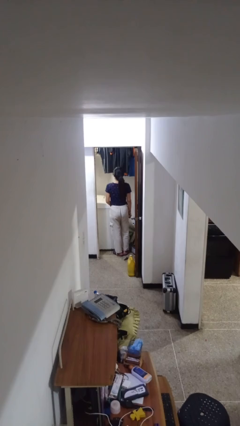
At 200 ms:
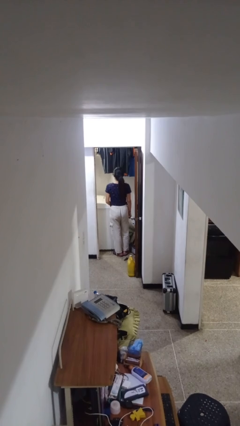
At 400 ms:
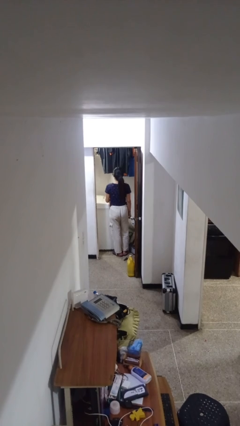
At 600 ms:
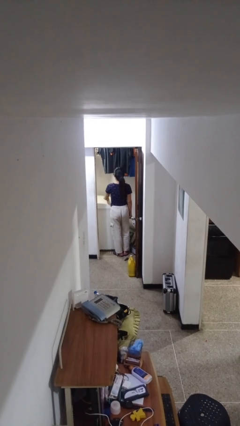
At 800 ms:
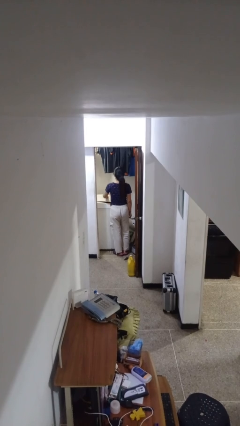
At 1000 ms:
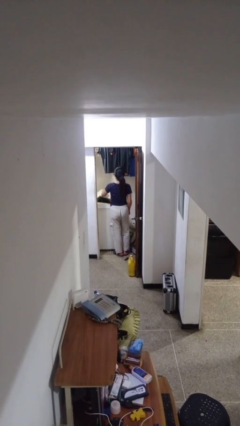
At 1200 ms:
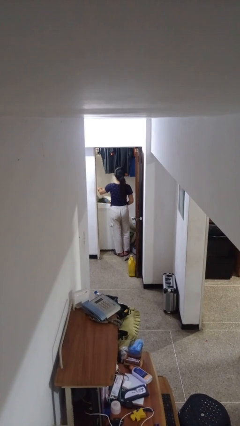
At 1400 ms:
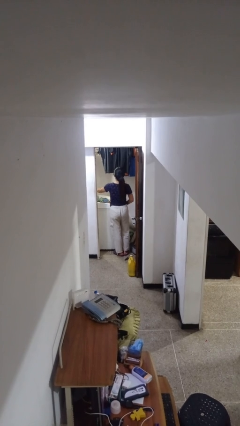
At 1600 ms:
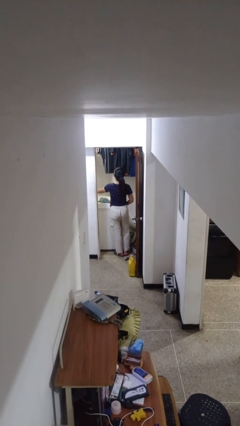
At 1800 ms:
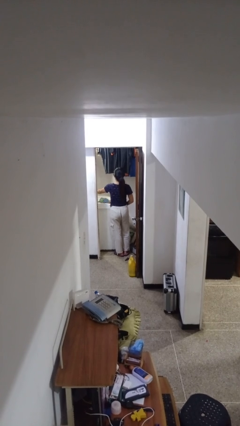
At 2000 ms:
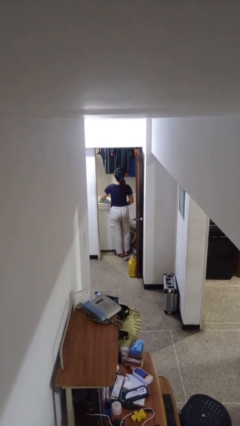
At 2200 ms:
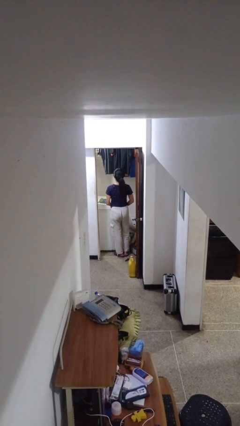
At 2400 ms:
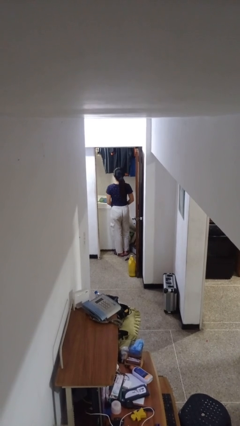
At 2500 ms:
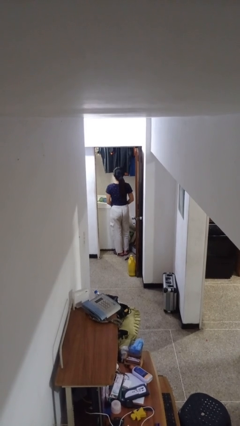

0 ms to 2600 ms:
person opens clothes washer

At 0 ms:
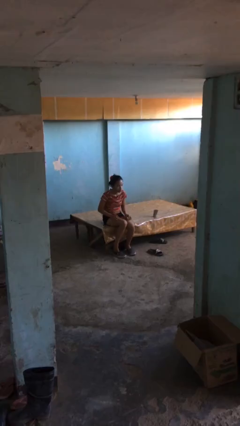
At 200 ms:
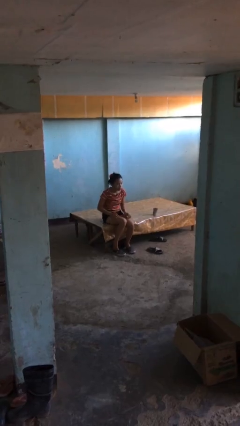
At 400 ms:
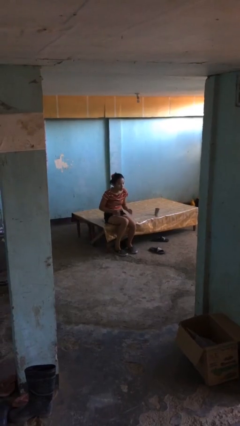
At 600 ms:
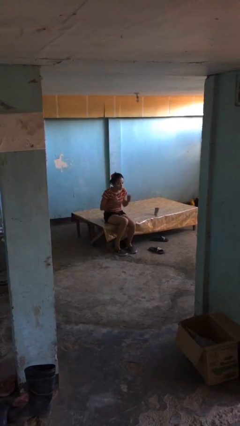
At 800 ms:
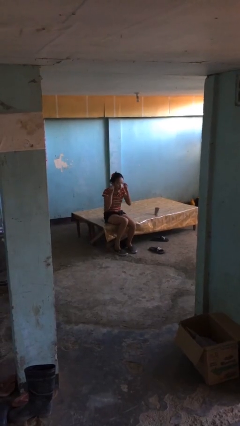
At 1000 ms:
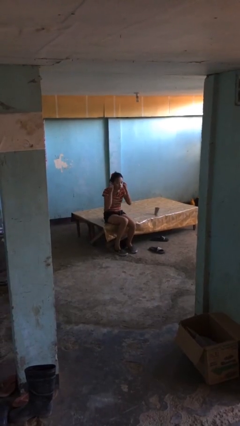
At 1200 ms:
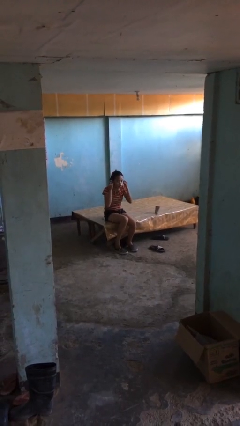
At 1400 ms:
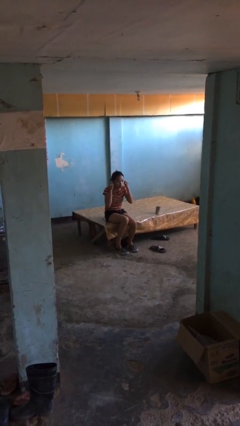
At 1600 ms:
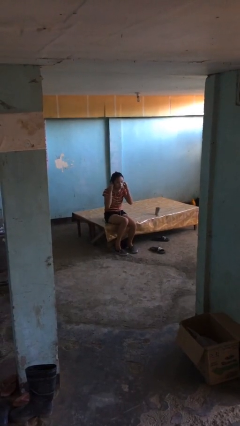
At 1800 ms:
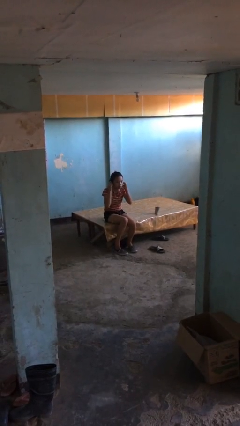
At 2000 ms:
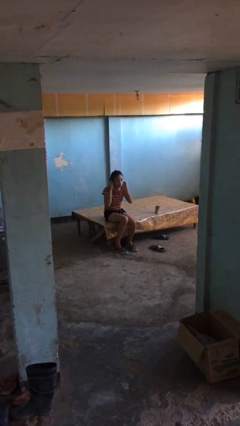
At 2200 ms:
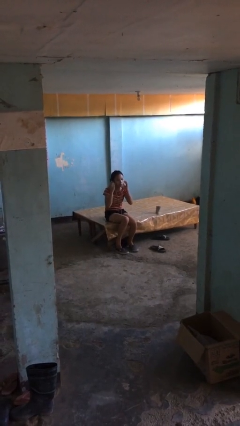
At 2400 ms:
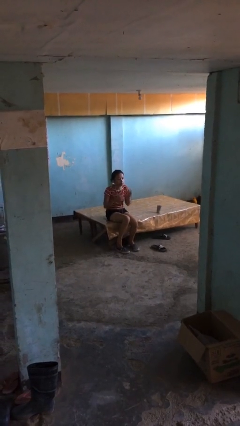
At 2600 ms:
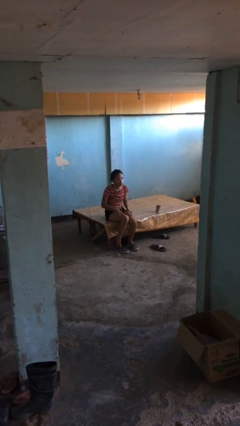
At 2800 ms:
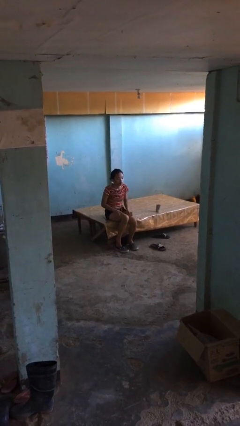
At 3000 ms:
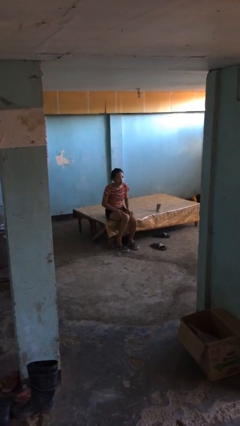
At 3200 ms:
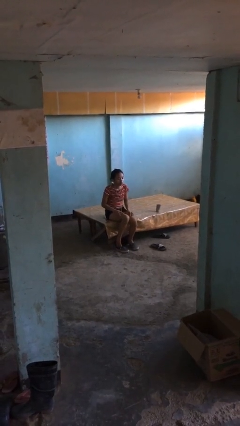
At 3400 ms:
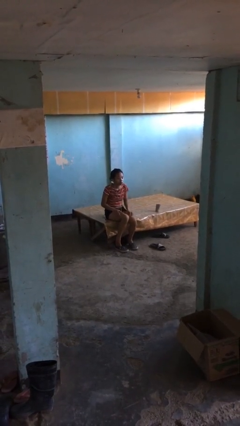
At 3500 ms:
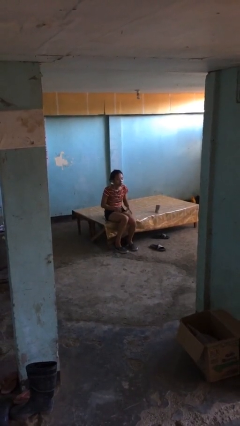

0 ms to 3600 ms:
person puts on headphones

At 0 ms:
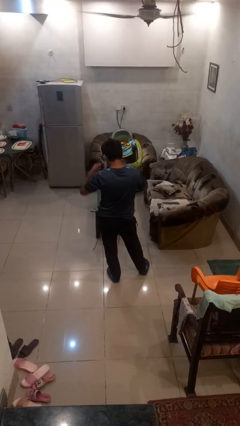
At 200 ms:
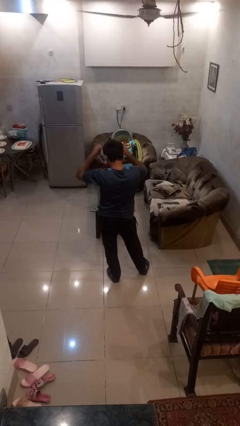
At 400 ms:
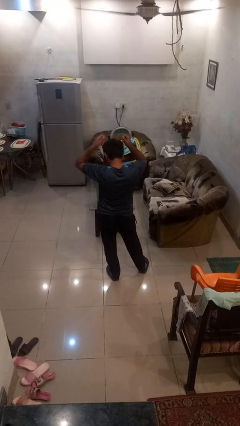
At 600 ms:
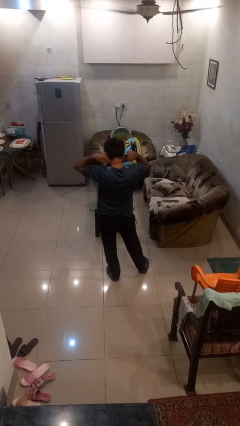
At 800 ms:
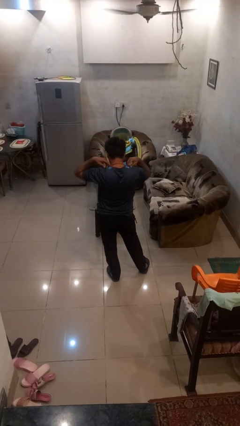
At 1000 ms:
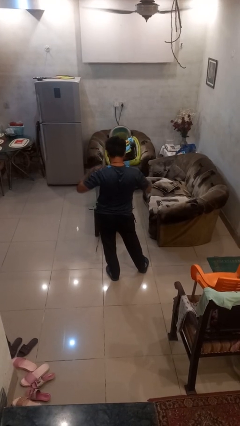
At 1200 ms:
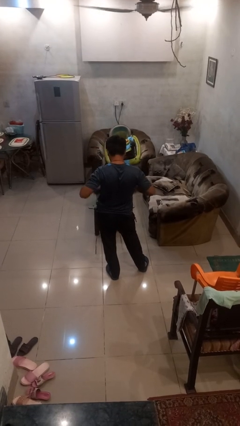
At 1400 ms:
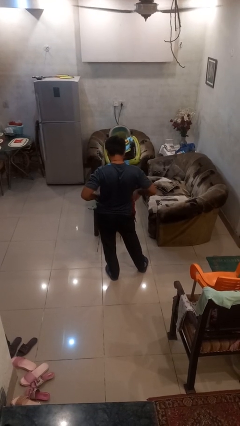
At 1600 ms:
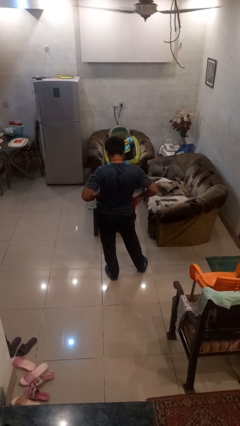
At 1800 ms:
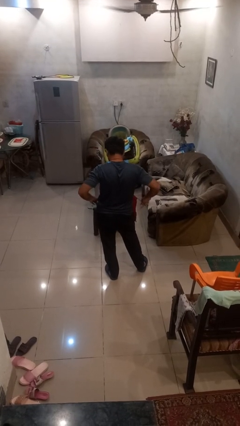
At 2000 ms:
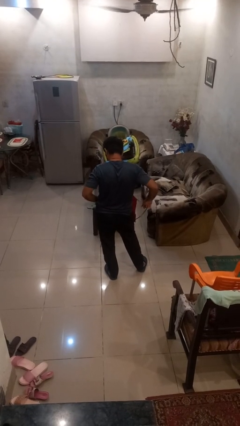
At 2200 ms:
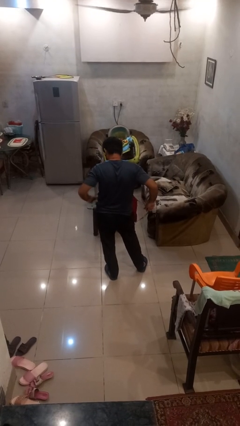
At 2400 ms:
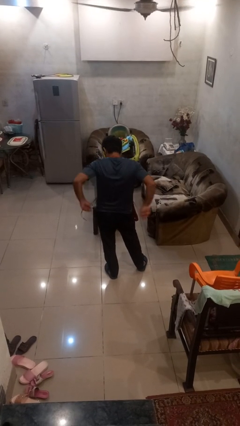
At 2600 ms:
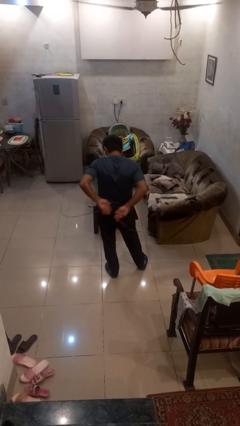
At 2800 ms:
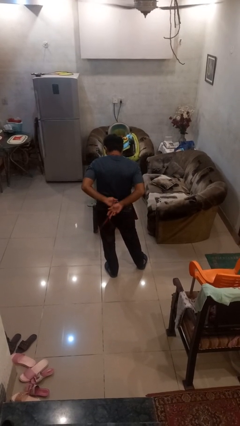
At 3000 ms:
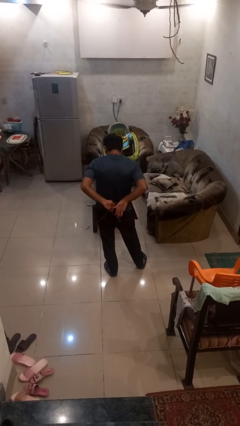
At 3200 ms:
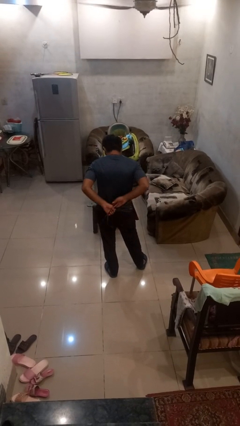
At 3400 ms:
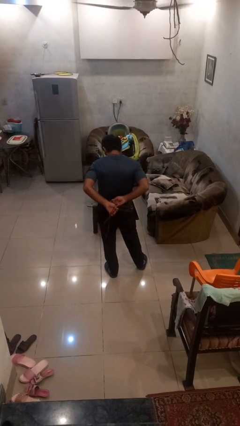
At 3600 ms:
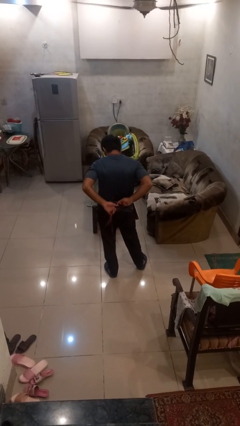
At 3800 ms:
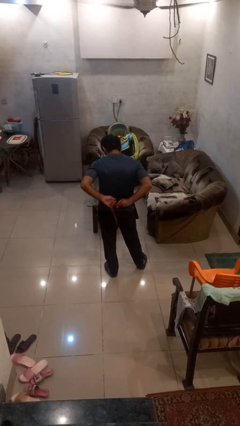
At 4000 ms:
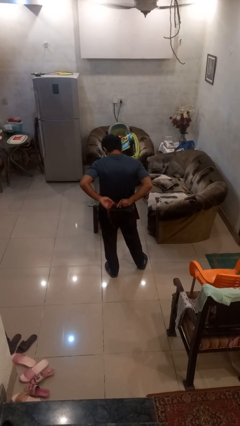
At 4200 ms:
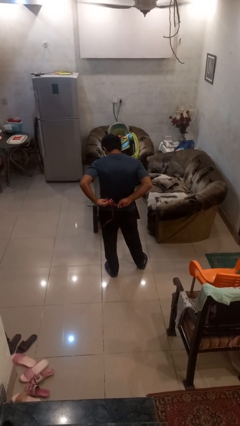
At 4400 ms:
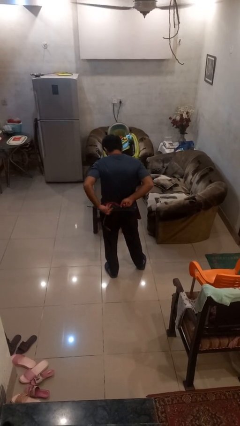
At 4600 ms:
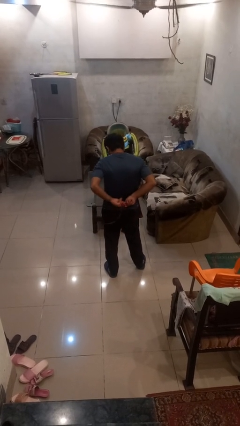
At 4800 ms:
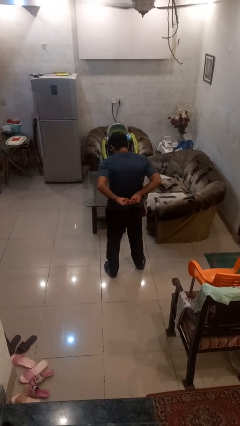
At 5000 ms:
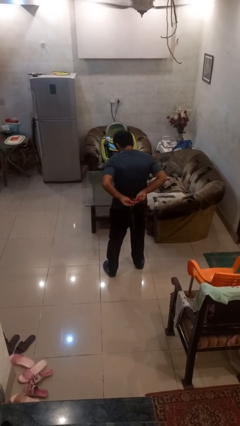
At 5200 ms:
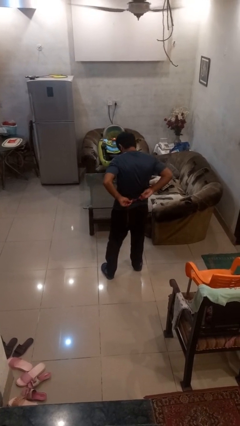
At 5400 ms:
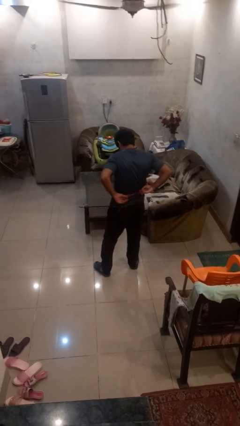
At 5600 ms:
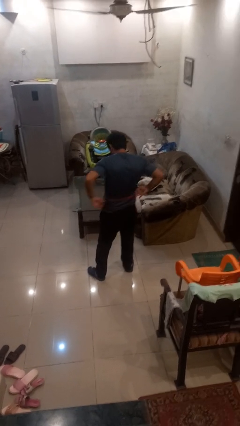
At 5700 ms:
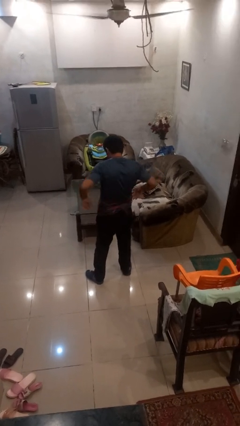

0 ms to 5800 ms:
person puts on apron

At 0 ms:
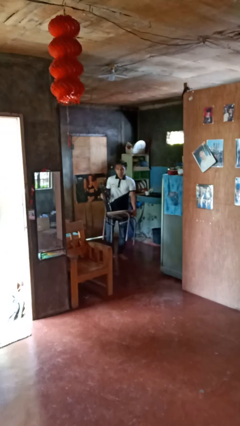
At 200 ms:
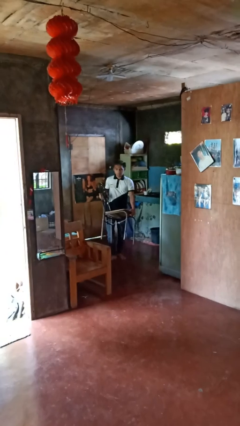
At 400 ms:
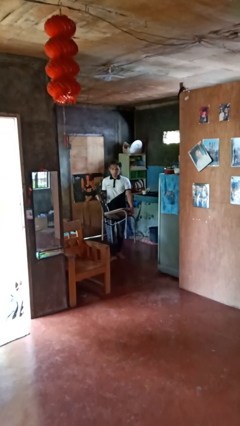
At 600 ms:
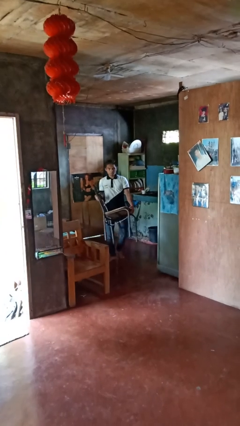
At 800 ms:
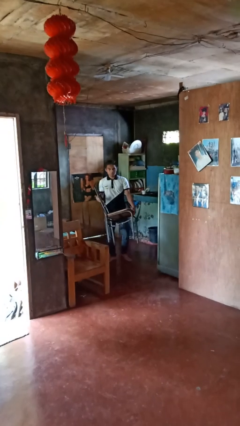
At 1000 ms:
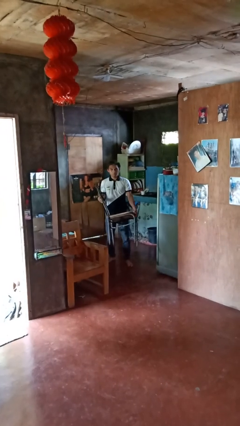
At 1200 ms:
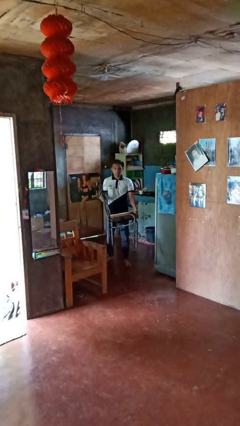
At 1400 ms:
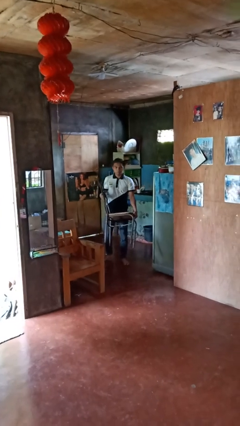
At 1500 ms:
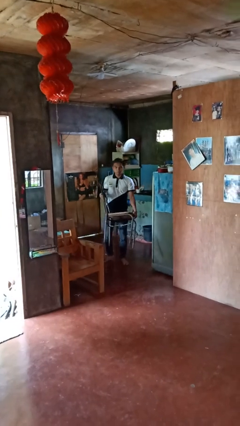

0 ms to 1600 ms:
person carries furniture

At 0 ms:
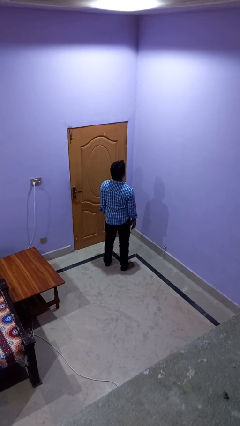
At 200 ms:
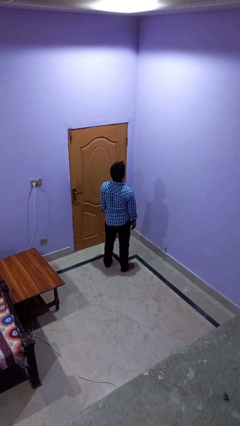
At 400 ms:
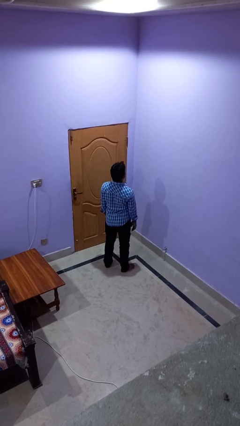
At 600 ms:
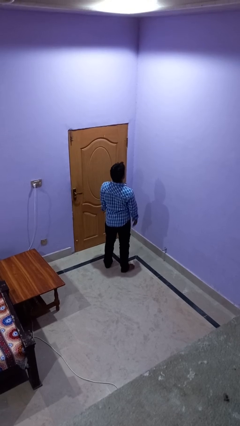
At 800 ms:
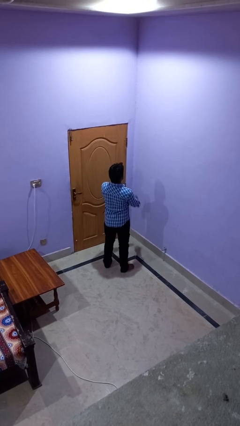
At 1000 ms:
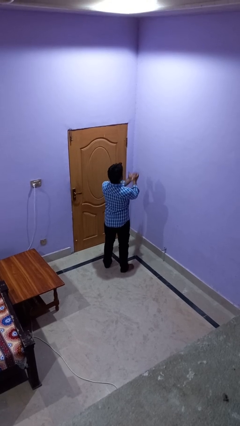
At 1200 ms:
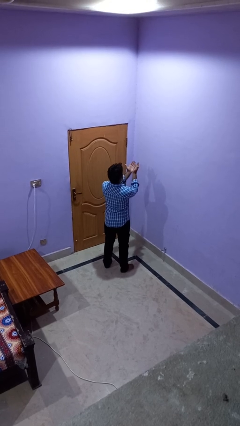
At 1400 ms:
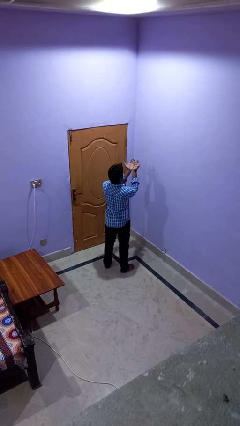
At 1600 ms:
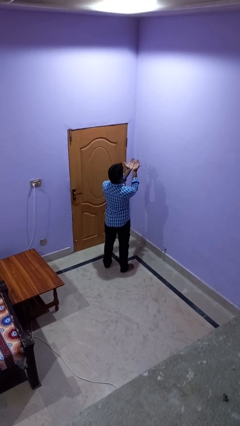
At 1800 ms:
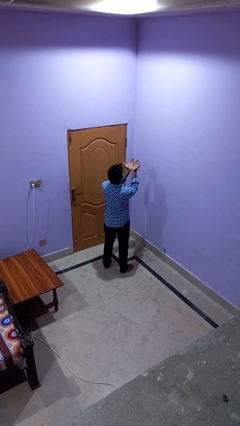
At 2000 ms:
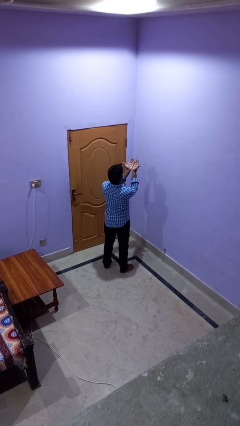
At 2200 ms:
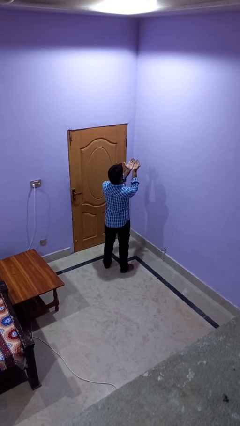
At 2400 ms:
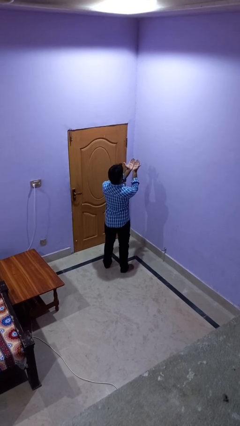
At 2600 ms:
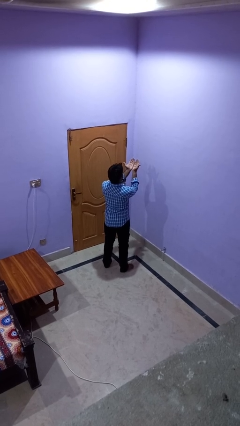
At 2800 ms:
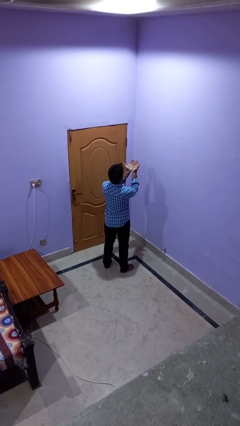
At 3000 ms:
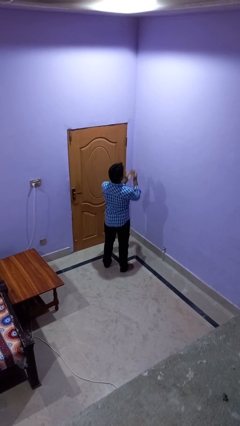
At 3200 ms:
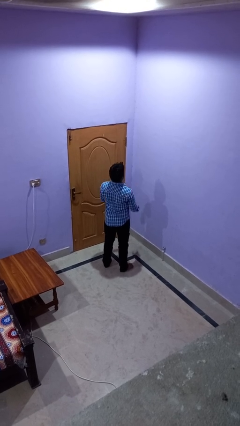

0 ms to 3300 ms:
person prays
